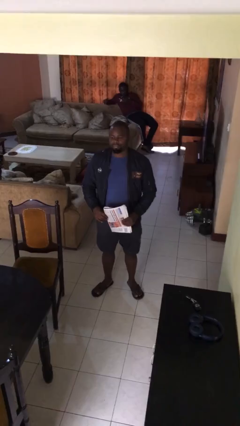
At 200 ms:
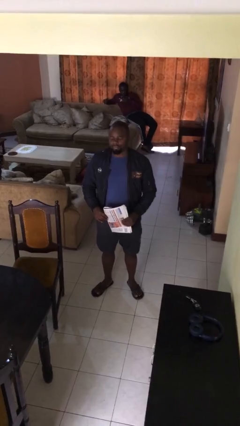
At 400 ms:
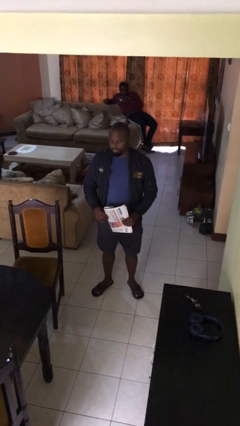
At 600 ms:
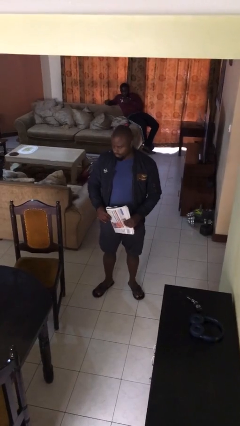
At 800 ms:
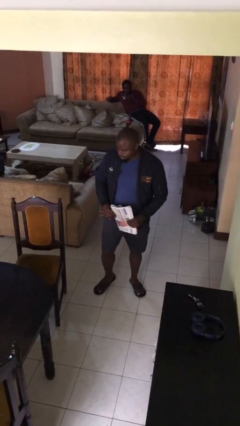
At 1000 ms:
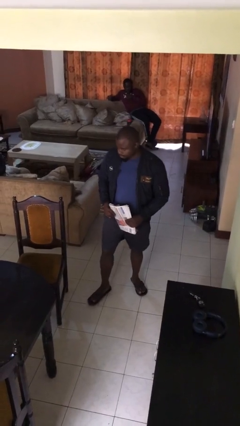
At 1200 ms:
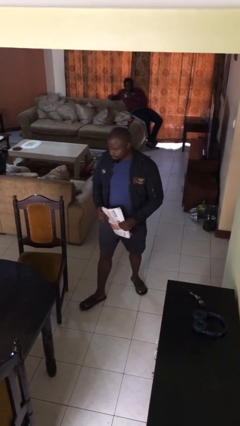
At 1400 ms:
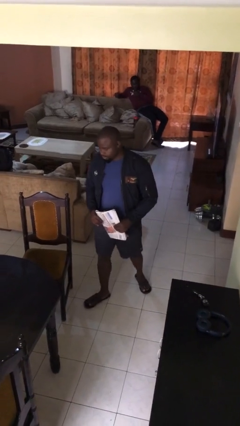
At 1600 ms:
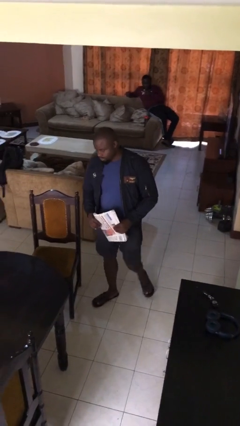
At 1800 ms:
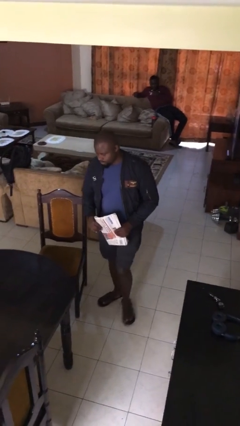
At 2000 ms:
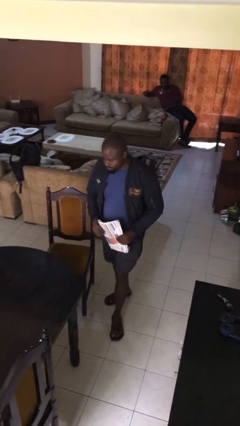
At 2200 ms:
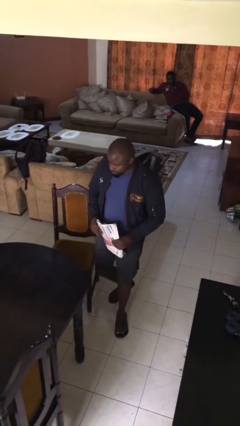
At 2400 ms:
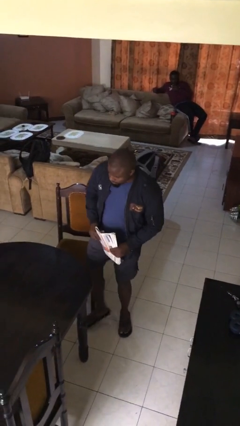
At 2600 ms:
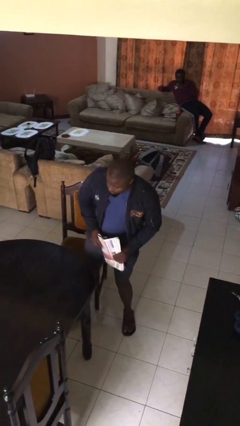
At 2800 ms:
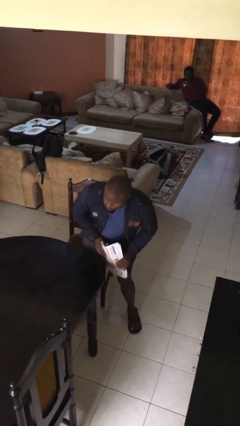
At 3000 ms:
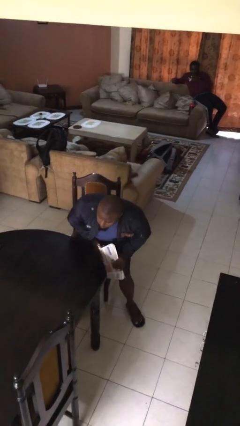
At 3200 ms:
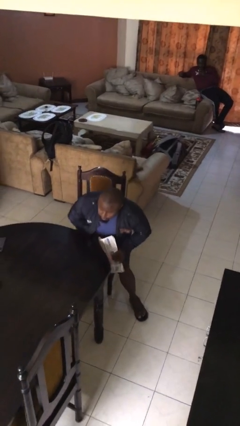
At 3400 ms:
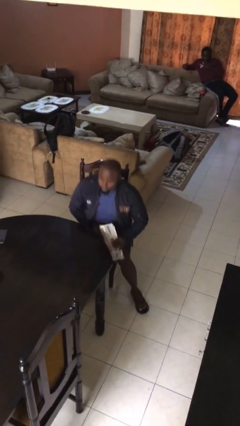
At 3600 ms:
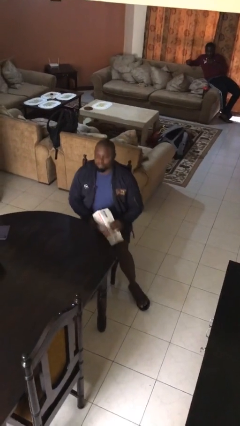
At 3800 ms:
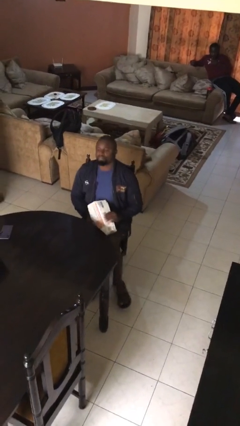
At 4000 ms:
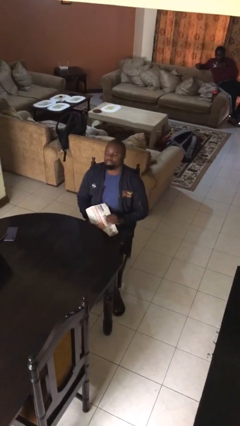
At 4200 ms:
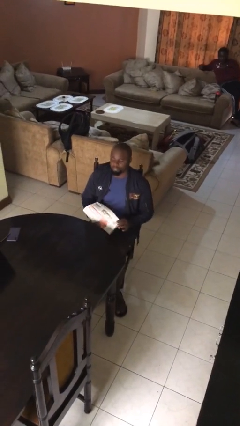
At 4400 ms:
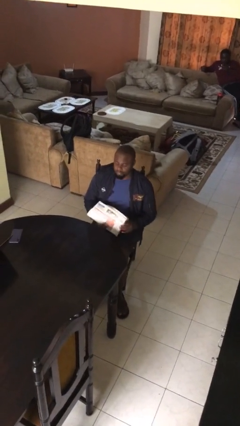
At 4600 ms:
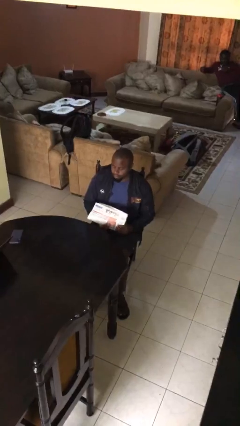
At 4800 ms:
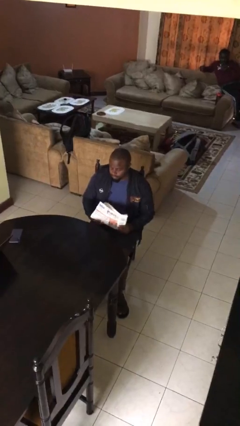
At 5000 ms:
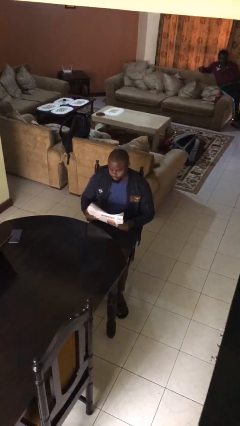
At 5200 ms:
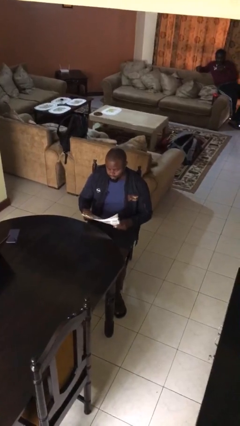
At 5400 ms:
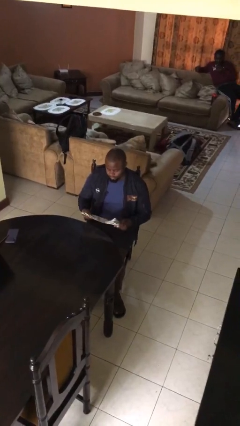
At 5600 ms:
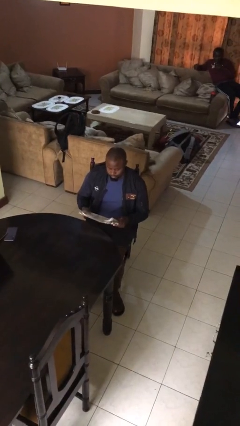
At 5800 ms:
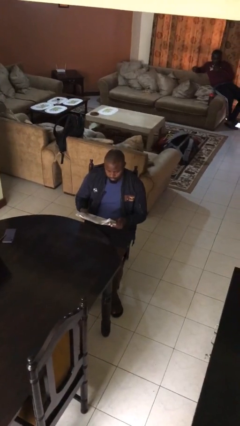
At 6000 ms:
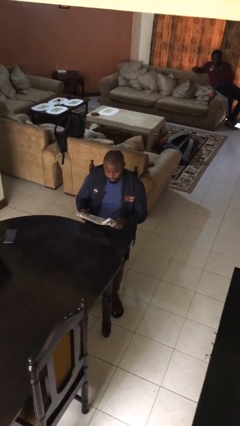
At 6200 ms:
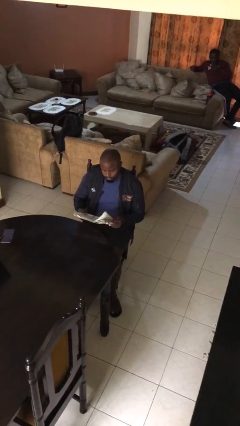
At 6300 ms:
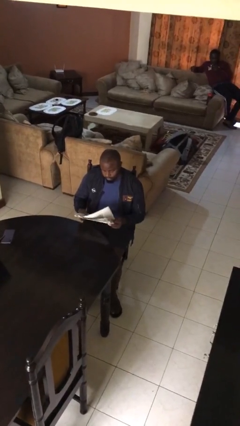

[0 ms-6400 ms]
person sits down

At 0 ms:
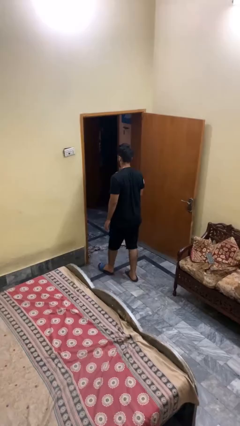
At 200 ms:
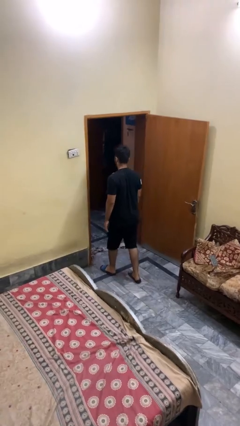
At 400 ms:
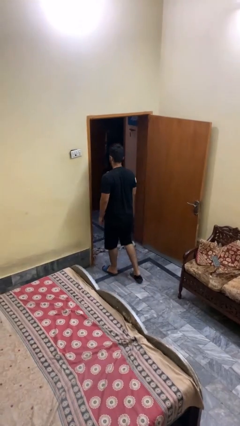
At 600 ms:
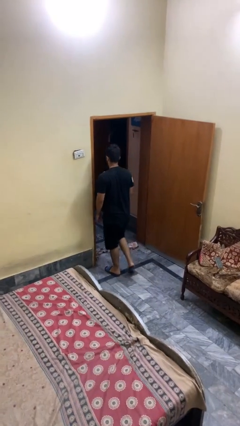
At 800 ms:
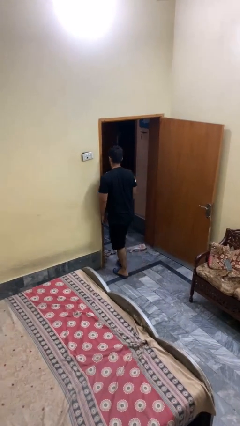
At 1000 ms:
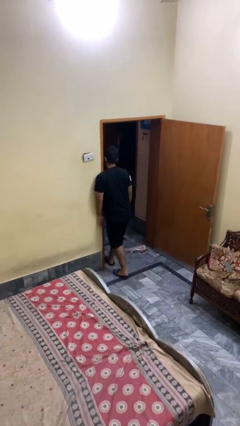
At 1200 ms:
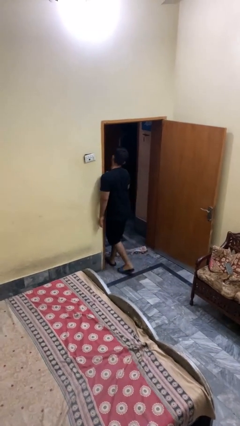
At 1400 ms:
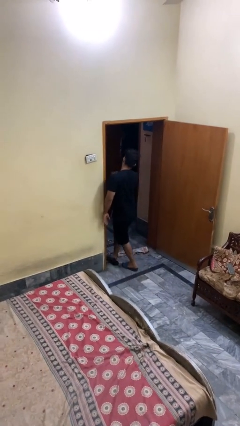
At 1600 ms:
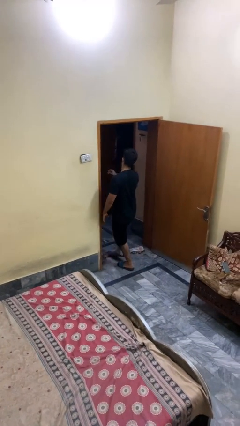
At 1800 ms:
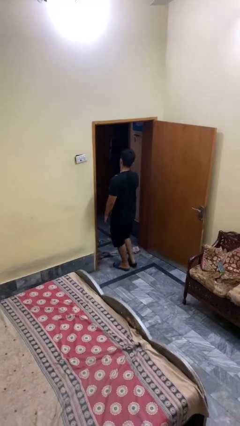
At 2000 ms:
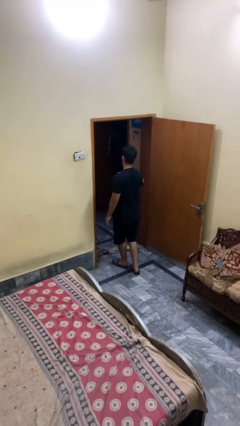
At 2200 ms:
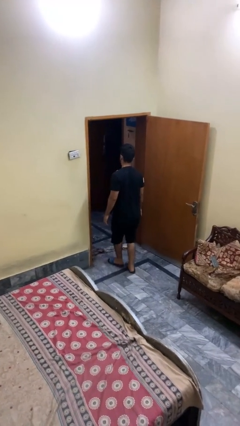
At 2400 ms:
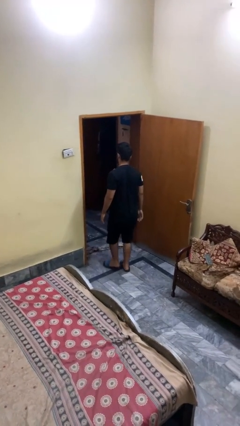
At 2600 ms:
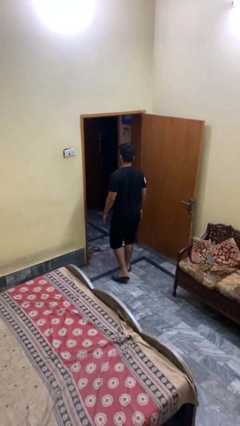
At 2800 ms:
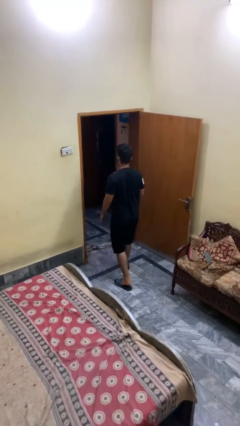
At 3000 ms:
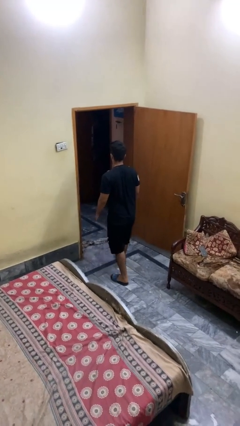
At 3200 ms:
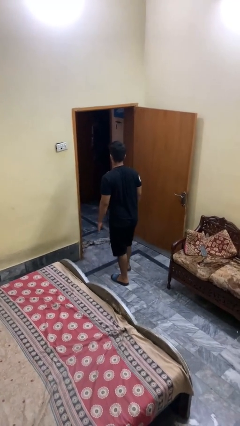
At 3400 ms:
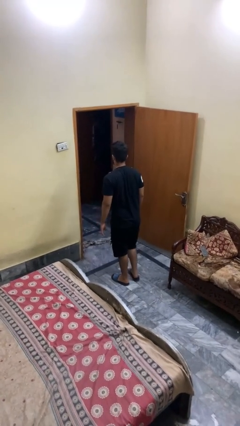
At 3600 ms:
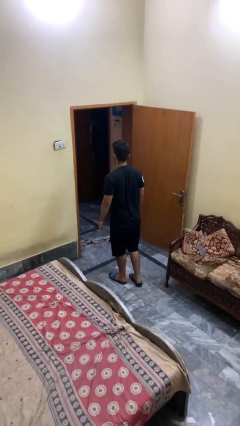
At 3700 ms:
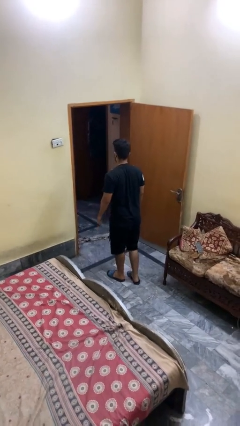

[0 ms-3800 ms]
person bumps into wall

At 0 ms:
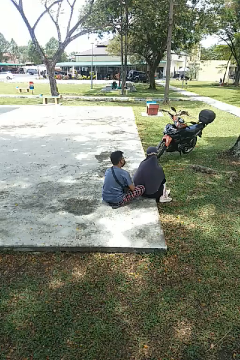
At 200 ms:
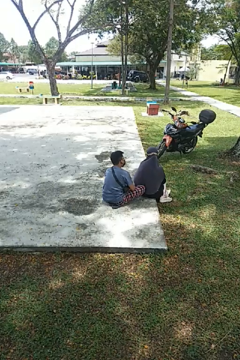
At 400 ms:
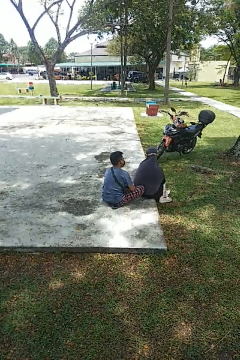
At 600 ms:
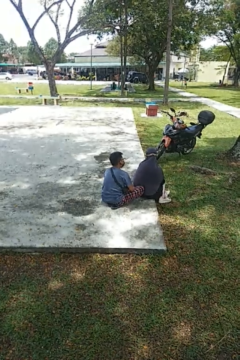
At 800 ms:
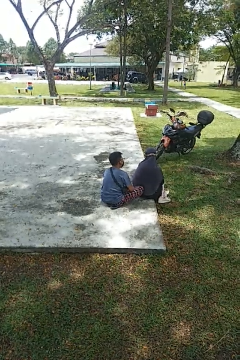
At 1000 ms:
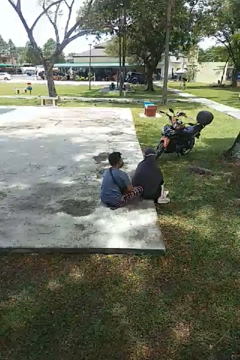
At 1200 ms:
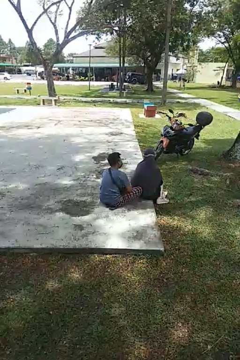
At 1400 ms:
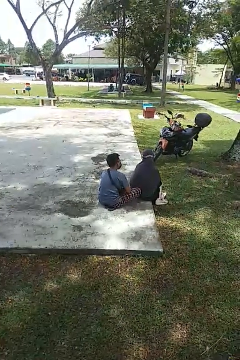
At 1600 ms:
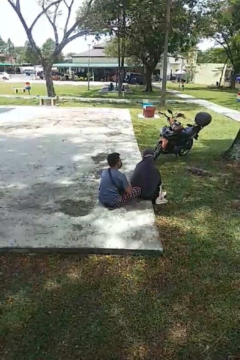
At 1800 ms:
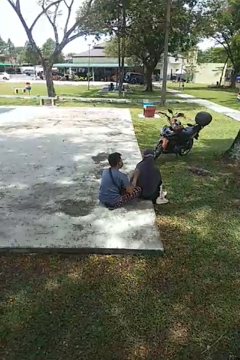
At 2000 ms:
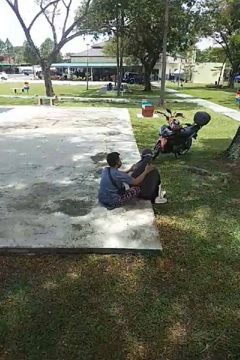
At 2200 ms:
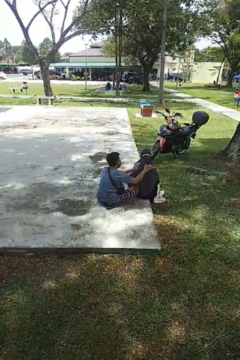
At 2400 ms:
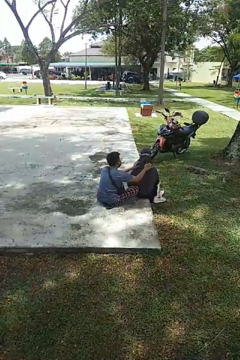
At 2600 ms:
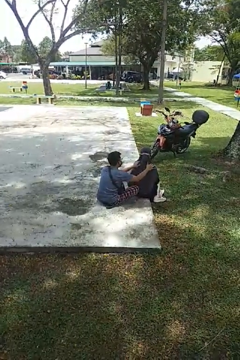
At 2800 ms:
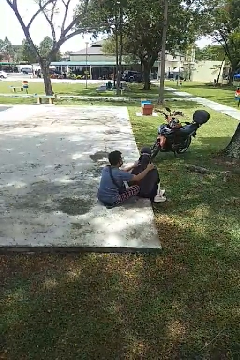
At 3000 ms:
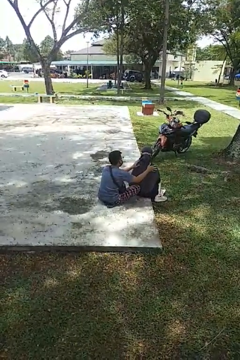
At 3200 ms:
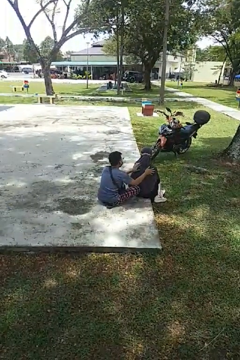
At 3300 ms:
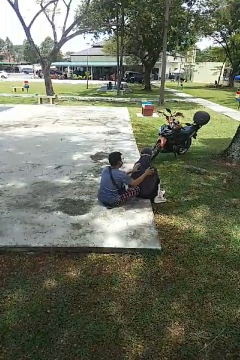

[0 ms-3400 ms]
person pounds shoulders of person

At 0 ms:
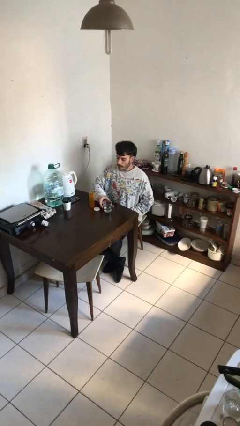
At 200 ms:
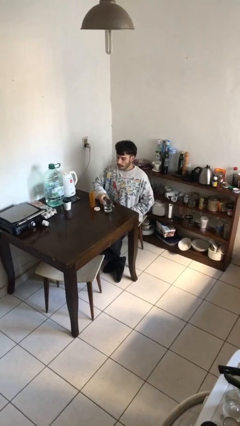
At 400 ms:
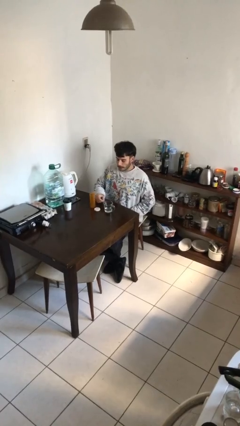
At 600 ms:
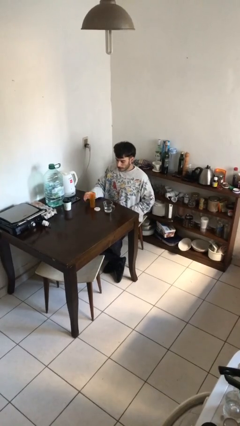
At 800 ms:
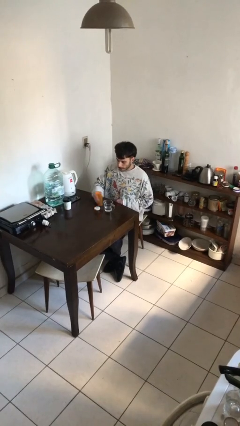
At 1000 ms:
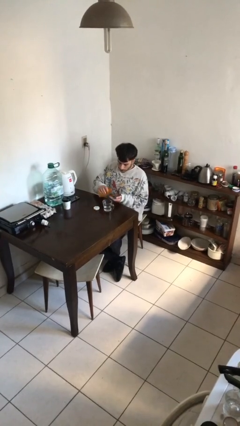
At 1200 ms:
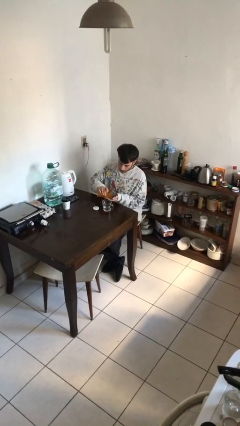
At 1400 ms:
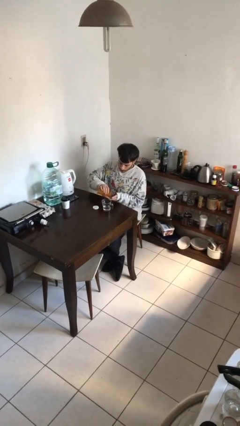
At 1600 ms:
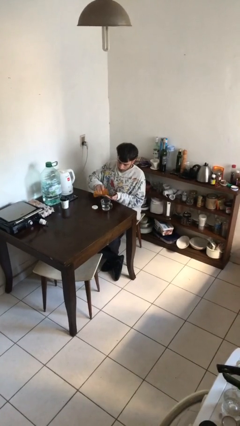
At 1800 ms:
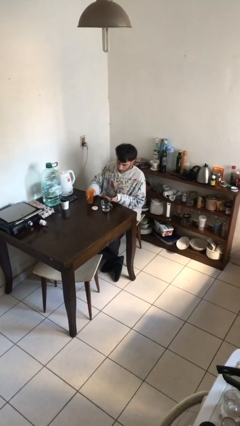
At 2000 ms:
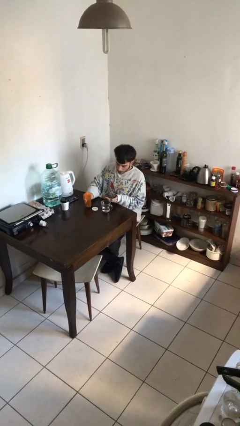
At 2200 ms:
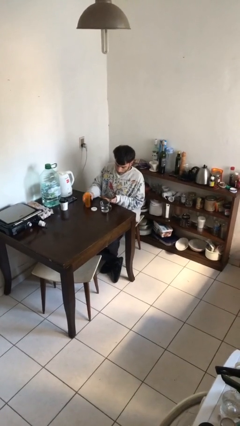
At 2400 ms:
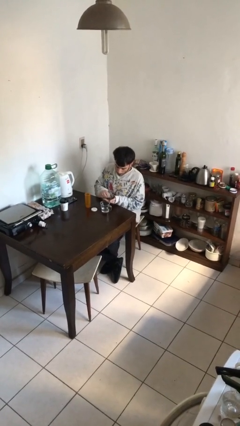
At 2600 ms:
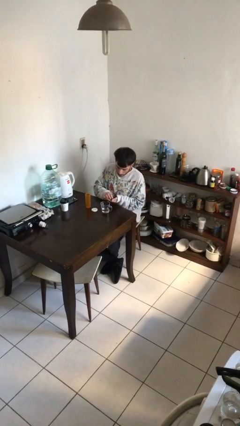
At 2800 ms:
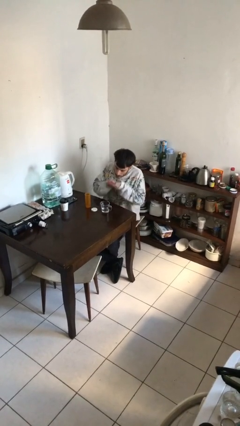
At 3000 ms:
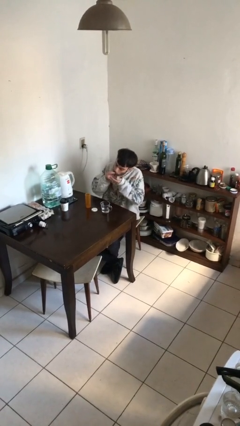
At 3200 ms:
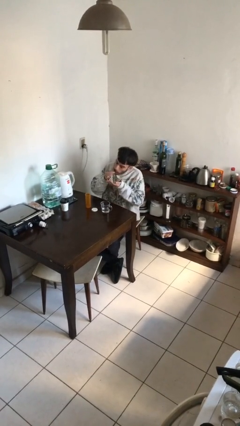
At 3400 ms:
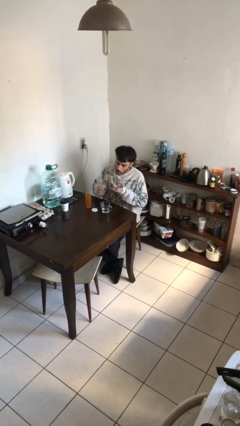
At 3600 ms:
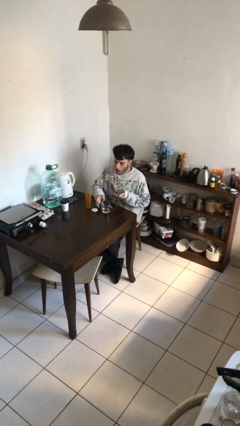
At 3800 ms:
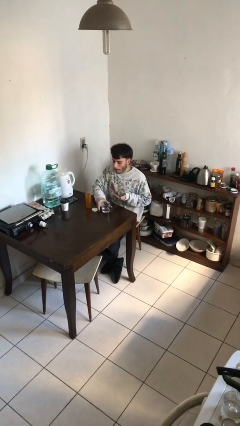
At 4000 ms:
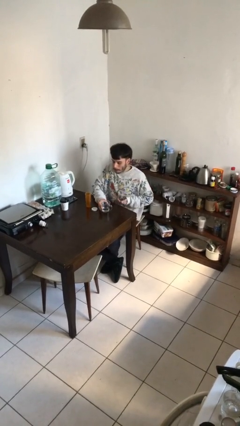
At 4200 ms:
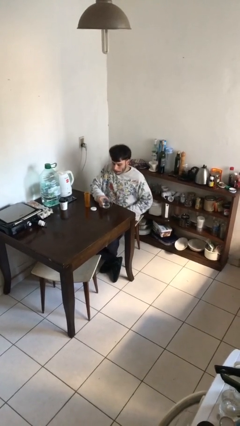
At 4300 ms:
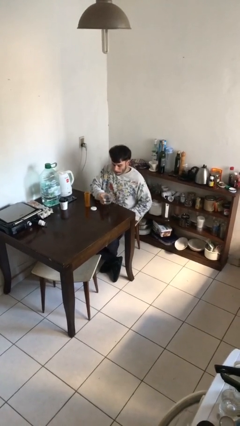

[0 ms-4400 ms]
person takes medicine pills

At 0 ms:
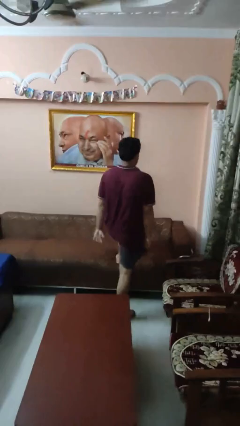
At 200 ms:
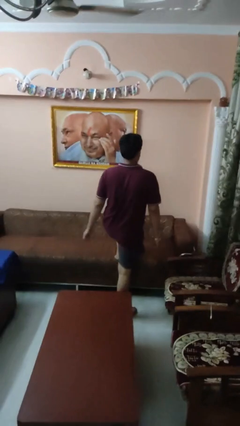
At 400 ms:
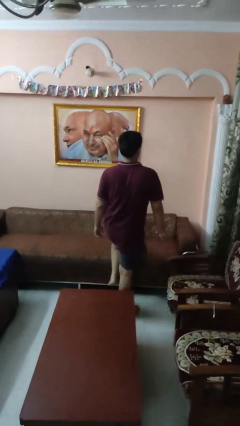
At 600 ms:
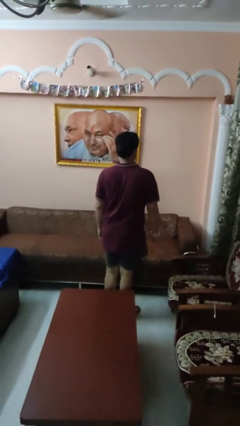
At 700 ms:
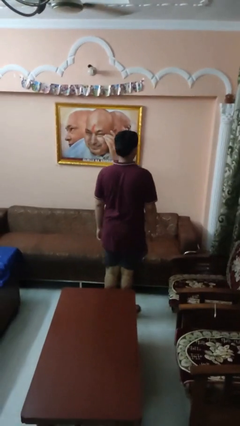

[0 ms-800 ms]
person climbs off couch
